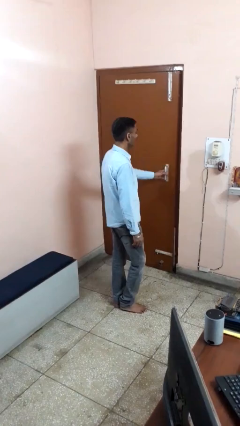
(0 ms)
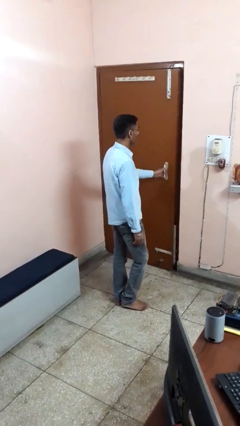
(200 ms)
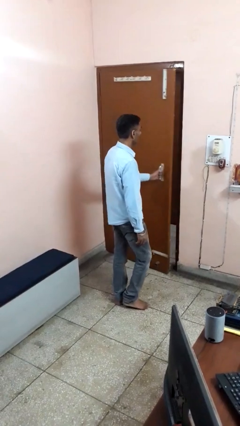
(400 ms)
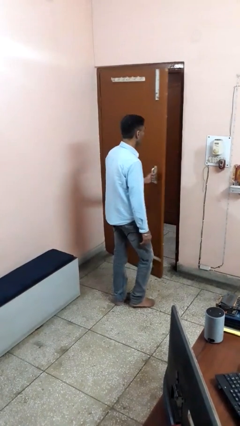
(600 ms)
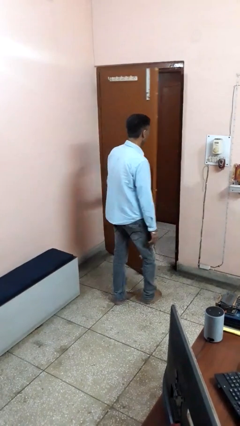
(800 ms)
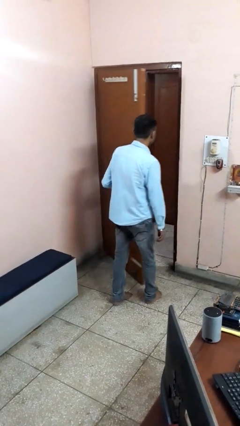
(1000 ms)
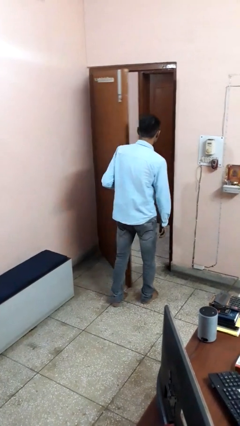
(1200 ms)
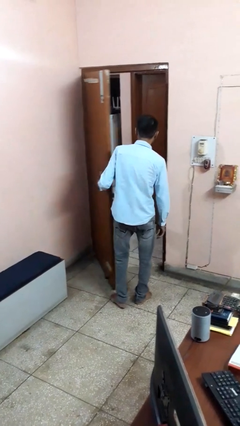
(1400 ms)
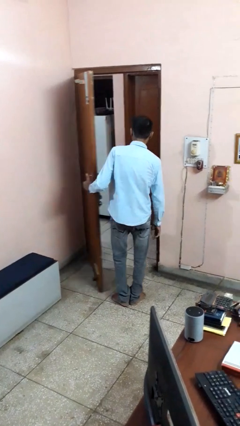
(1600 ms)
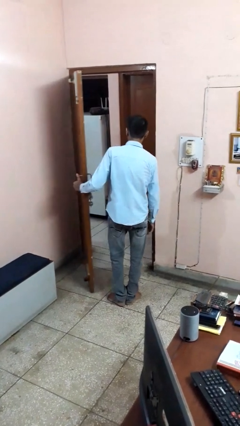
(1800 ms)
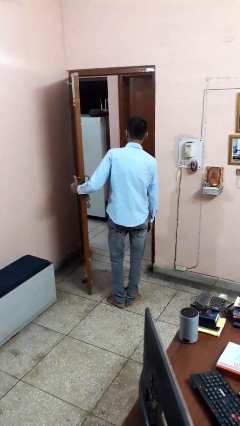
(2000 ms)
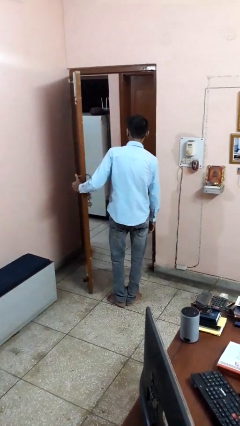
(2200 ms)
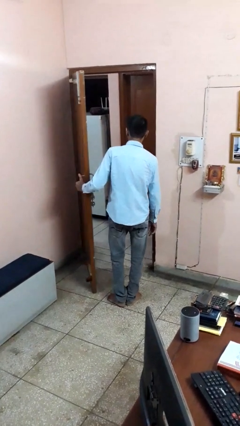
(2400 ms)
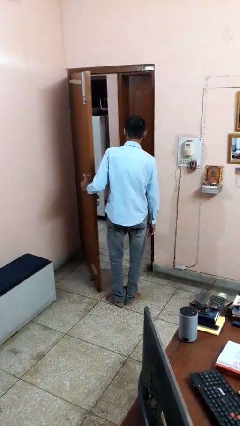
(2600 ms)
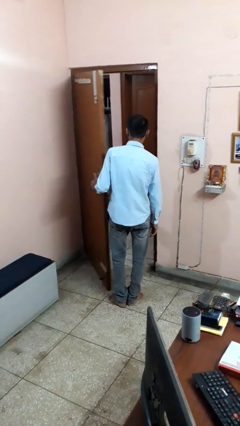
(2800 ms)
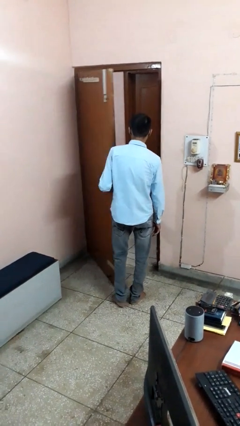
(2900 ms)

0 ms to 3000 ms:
person opens facility door

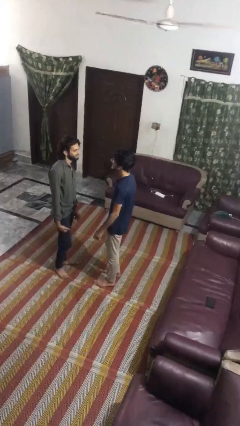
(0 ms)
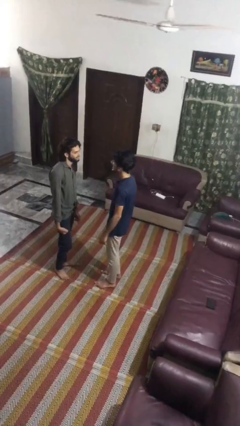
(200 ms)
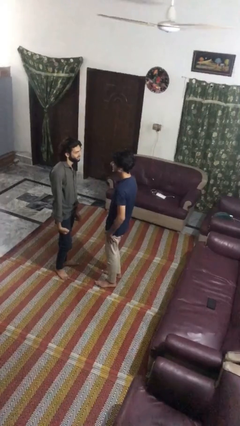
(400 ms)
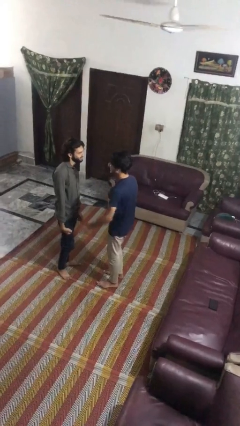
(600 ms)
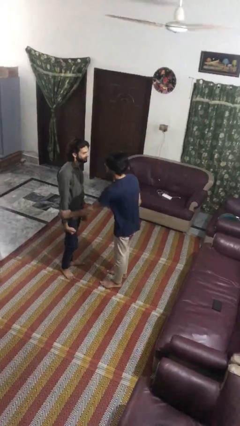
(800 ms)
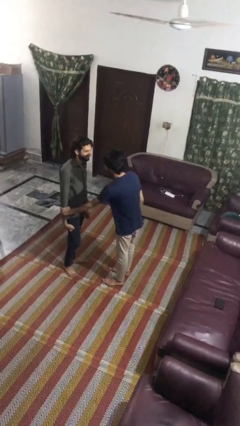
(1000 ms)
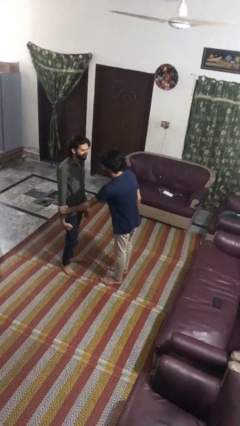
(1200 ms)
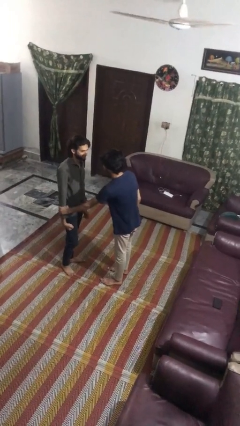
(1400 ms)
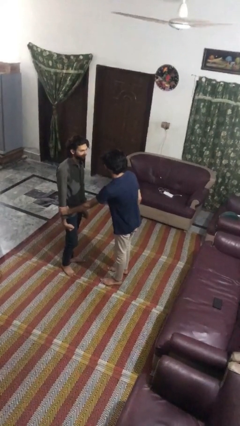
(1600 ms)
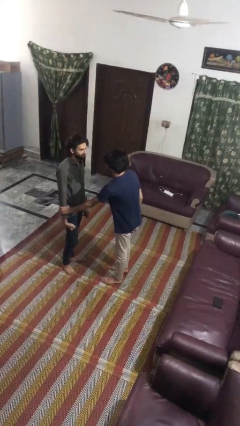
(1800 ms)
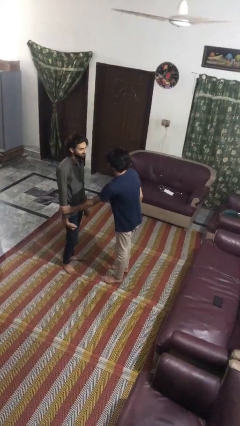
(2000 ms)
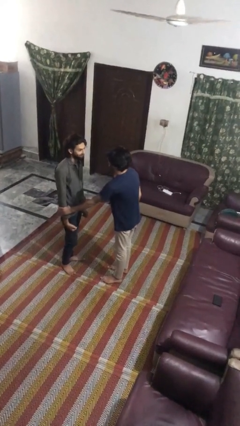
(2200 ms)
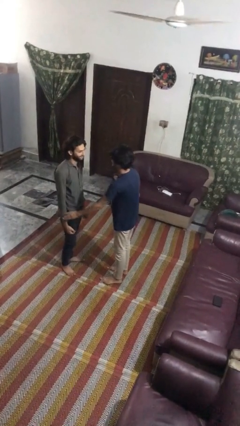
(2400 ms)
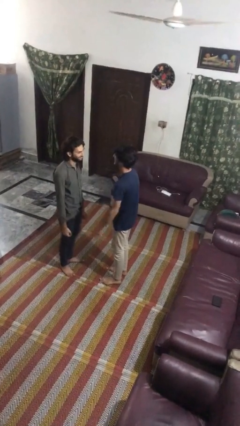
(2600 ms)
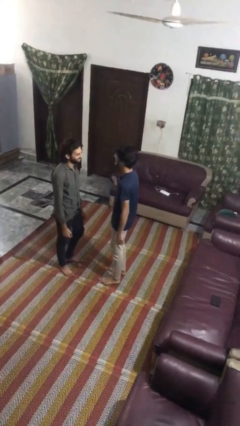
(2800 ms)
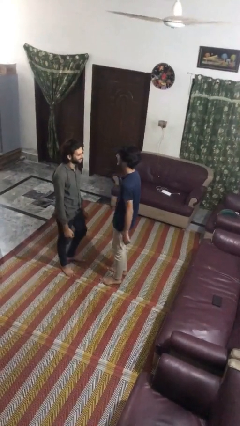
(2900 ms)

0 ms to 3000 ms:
person grabs person by forearm

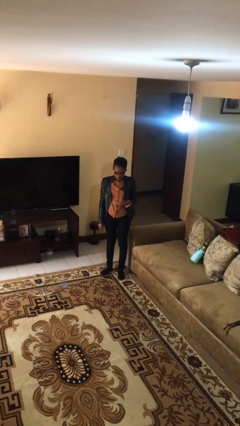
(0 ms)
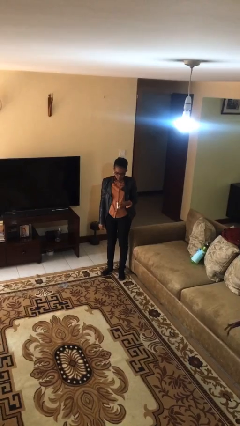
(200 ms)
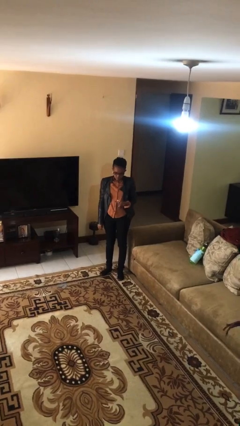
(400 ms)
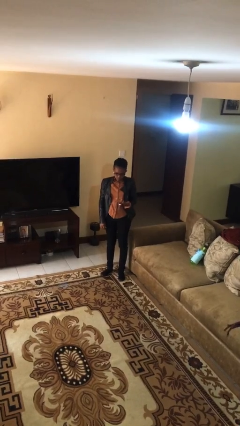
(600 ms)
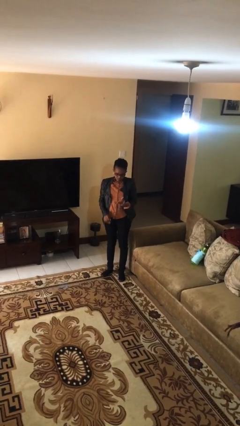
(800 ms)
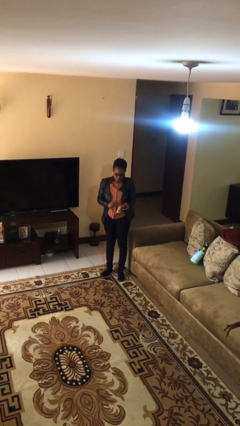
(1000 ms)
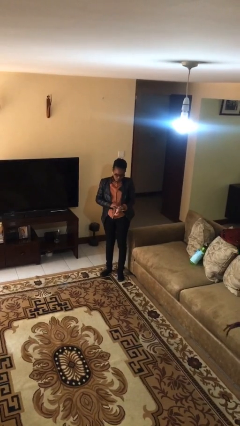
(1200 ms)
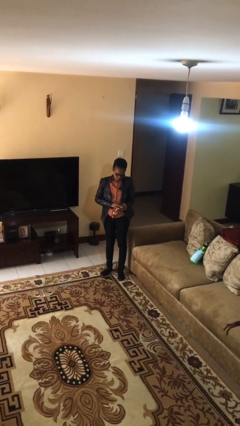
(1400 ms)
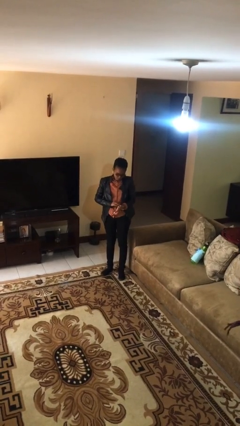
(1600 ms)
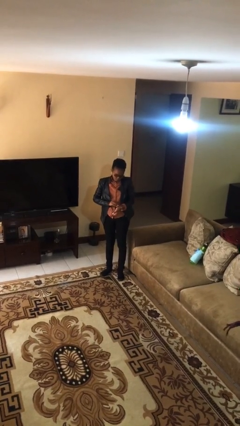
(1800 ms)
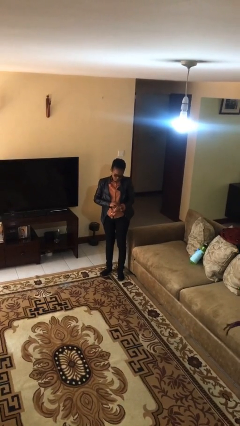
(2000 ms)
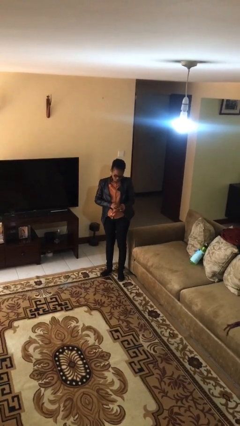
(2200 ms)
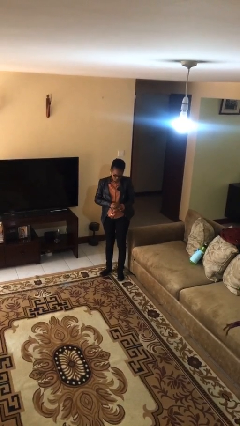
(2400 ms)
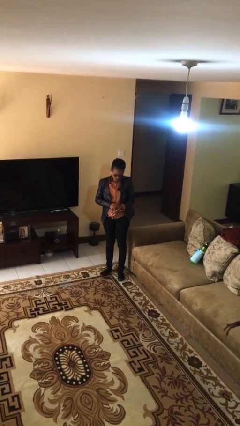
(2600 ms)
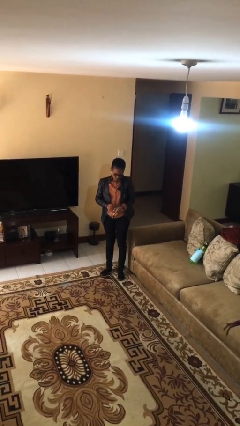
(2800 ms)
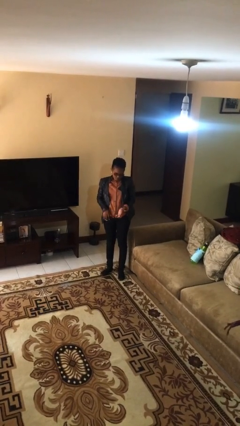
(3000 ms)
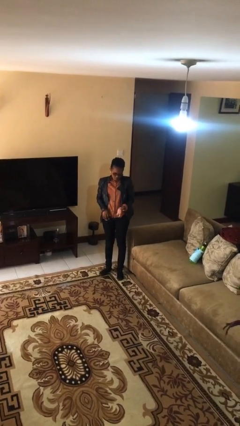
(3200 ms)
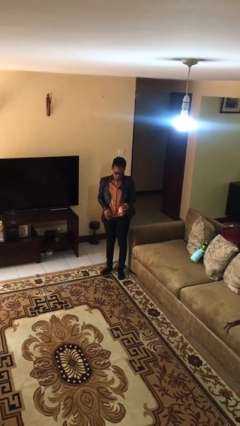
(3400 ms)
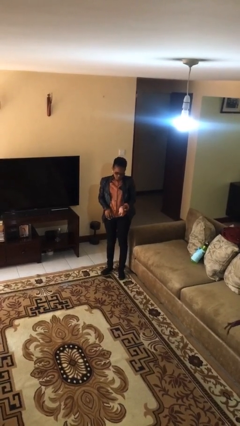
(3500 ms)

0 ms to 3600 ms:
person puts on wristwatch

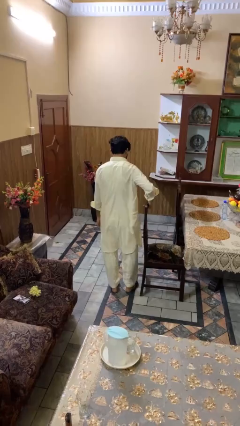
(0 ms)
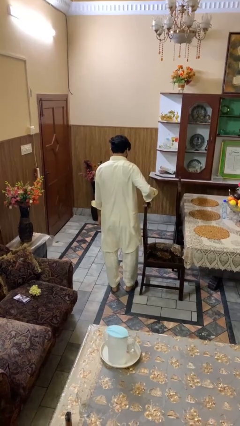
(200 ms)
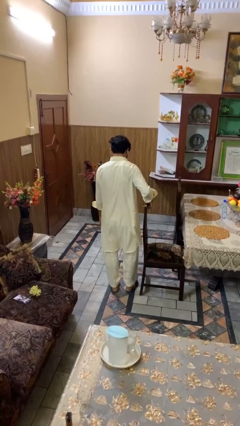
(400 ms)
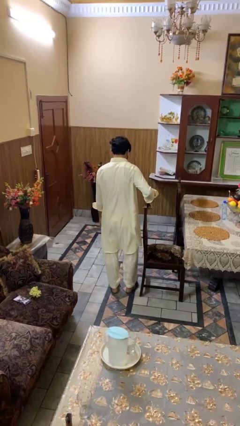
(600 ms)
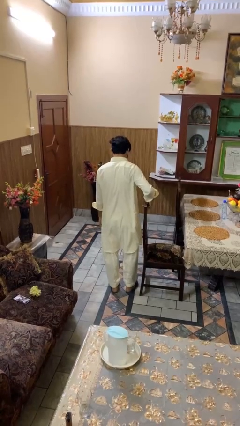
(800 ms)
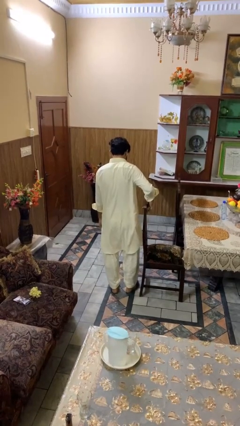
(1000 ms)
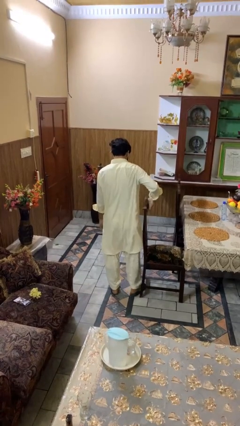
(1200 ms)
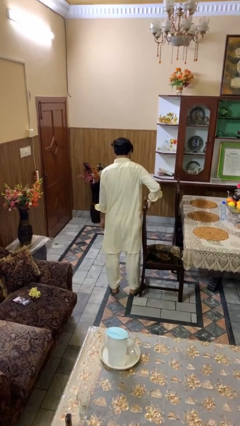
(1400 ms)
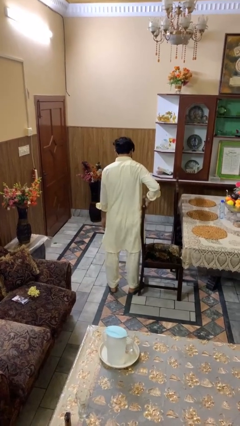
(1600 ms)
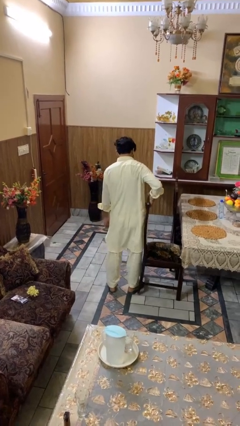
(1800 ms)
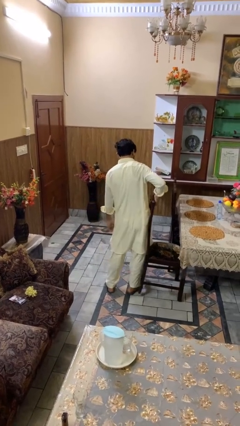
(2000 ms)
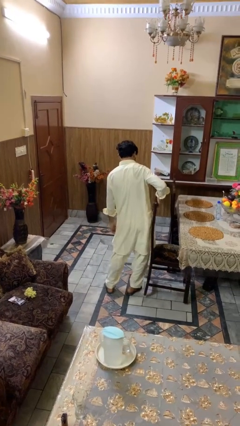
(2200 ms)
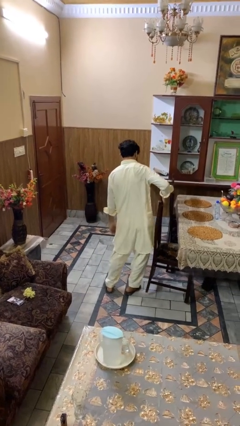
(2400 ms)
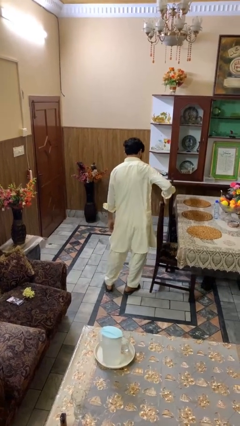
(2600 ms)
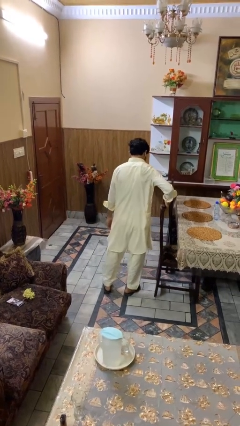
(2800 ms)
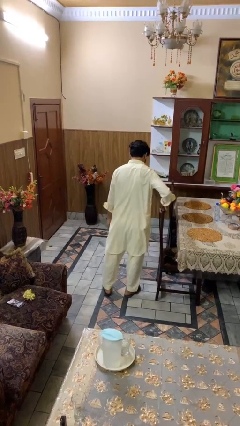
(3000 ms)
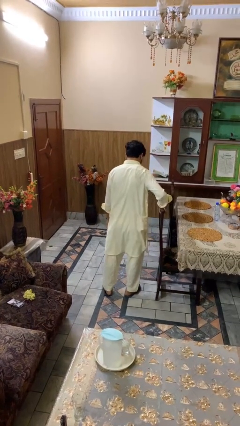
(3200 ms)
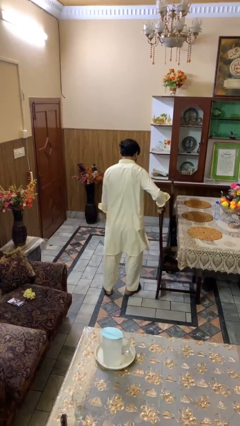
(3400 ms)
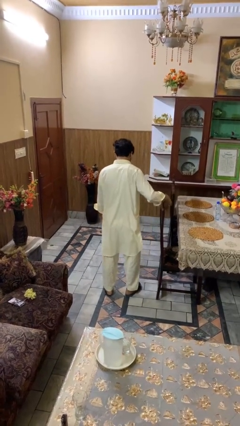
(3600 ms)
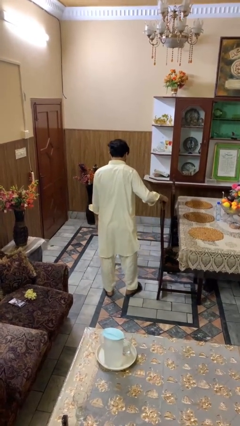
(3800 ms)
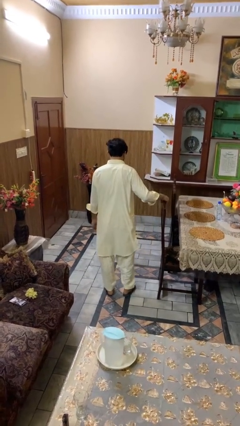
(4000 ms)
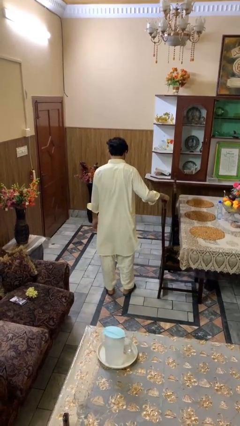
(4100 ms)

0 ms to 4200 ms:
person pushes in chair

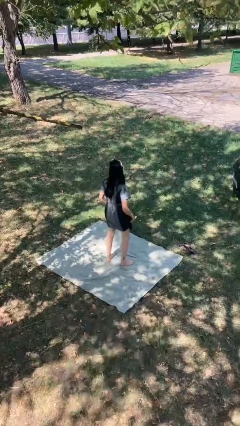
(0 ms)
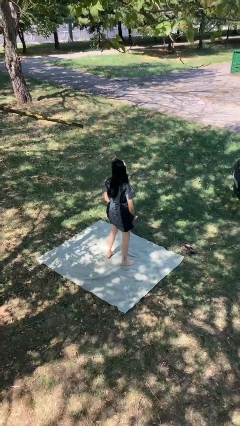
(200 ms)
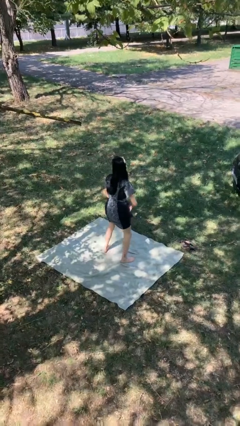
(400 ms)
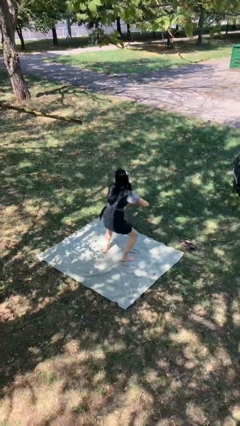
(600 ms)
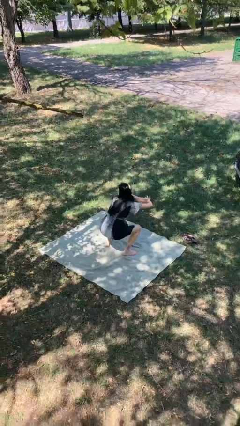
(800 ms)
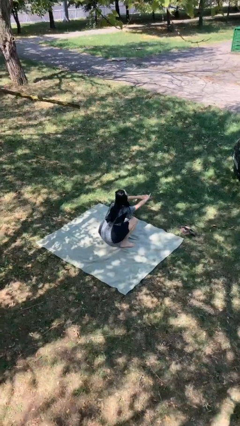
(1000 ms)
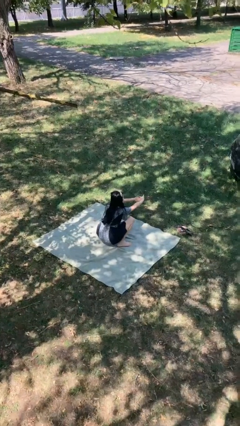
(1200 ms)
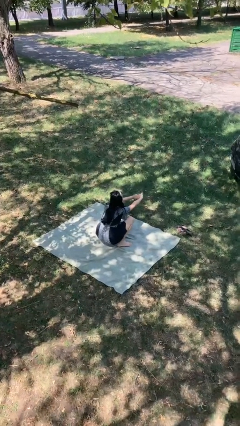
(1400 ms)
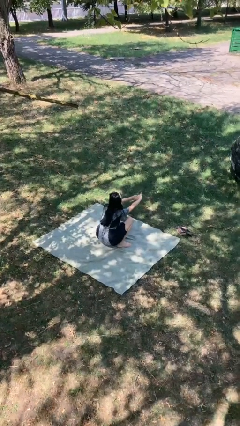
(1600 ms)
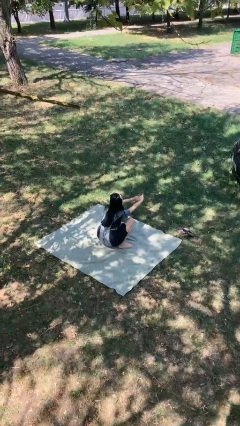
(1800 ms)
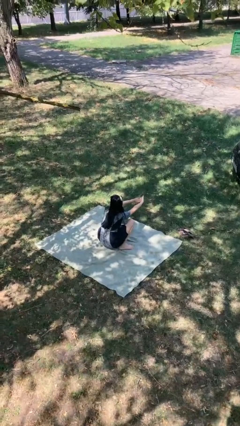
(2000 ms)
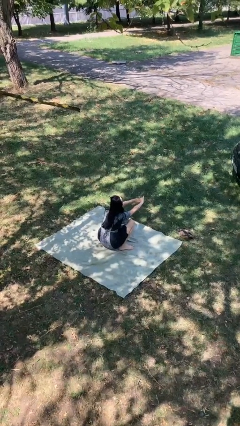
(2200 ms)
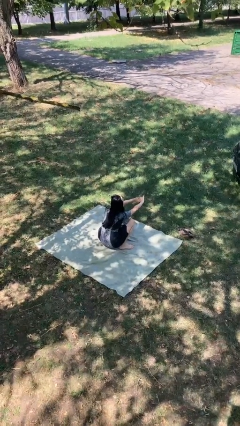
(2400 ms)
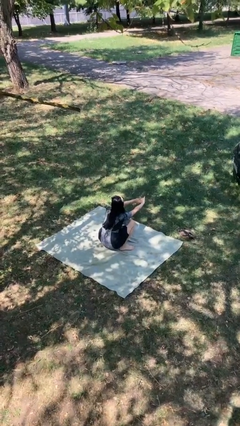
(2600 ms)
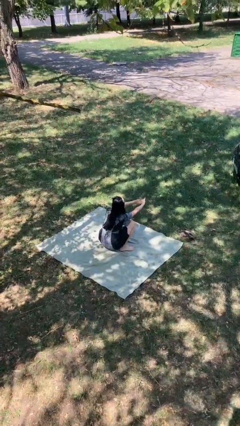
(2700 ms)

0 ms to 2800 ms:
person squats

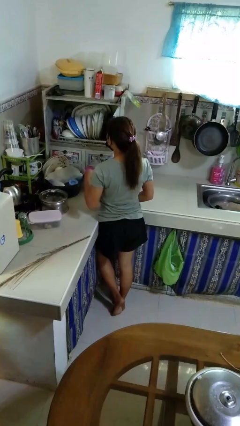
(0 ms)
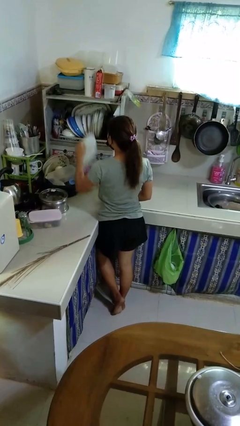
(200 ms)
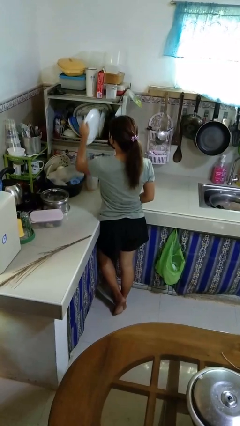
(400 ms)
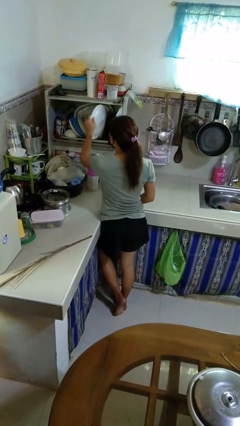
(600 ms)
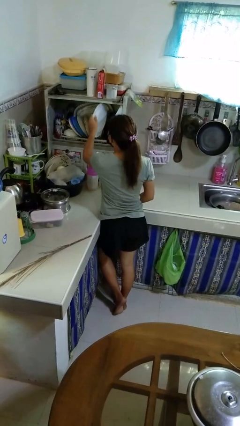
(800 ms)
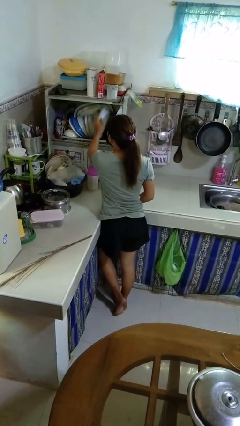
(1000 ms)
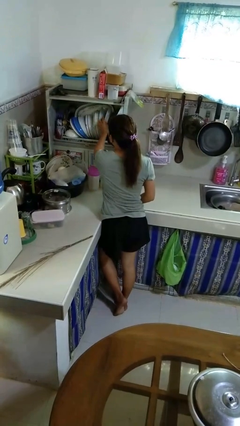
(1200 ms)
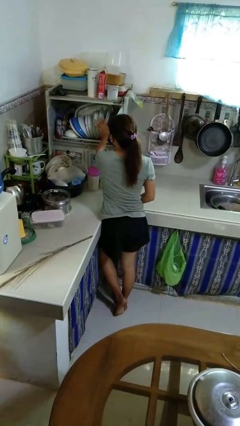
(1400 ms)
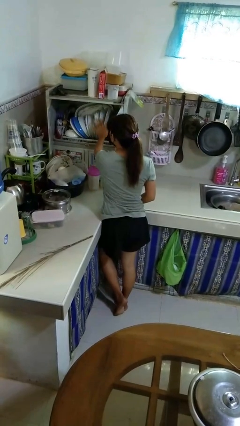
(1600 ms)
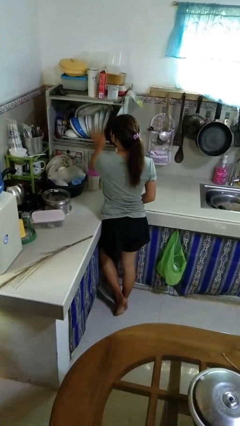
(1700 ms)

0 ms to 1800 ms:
person puts object into kitchen drawer
